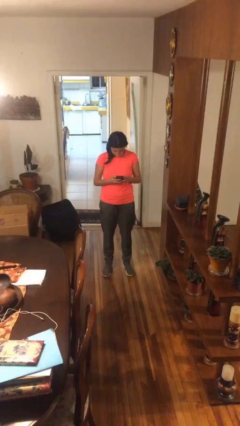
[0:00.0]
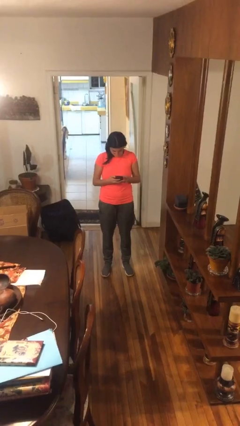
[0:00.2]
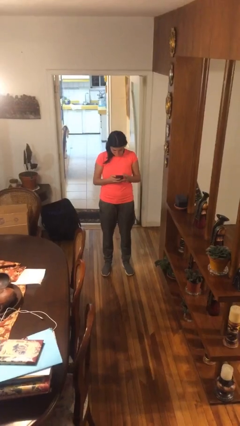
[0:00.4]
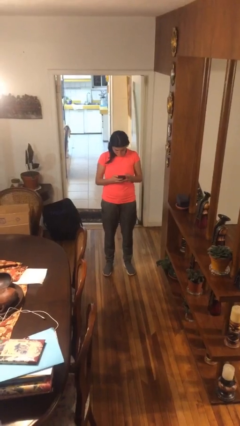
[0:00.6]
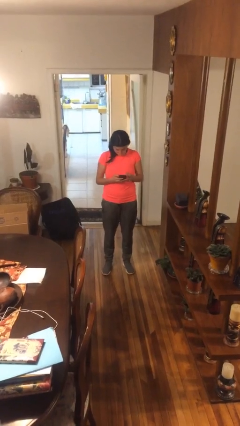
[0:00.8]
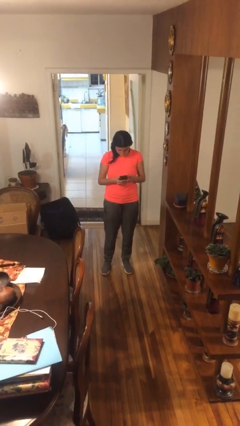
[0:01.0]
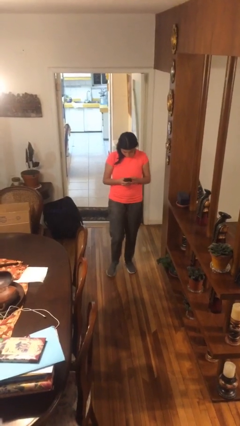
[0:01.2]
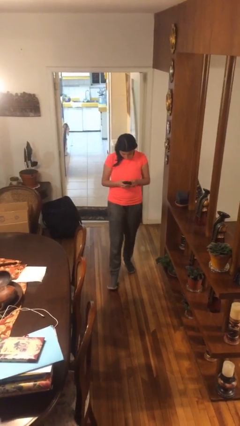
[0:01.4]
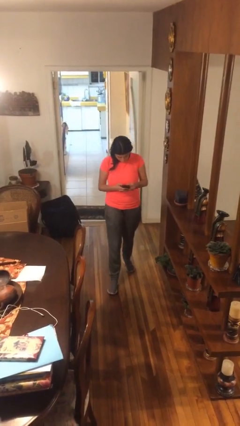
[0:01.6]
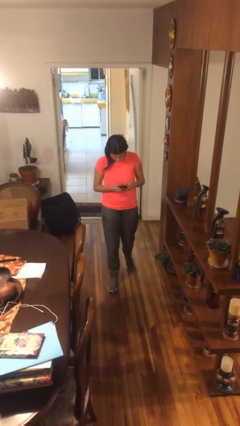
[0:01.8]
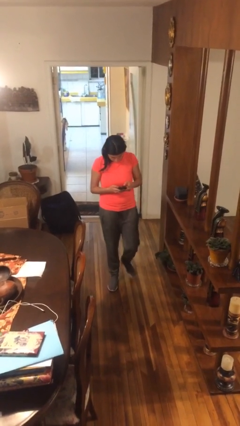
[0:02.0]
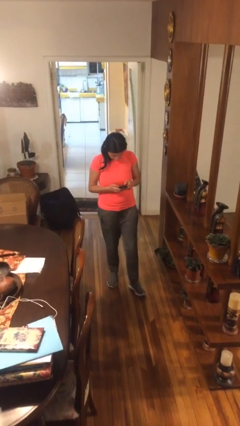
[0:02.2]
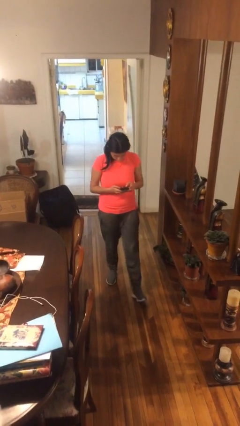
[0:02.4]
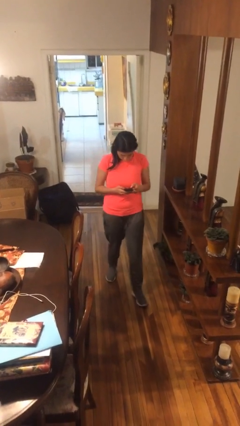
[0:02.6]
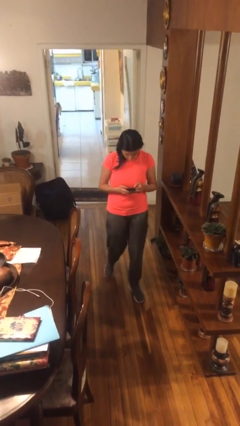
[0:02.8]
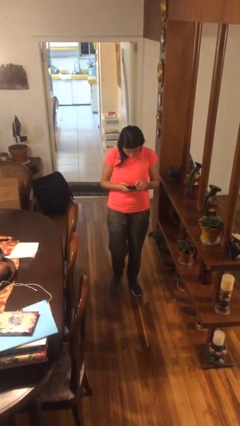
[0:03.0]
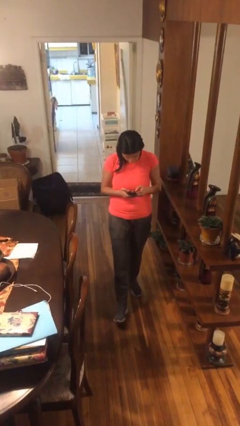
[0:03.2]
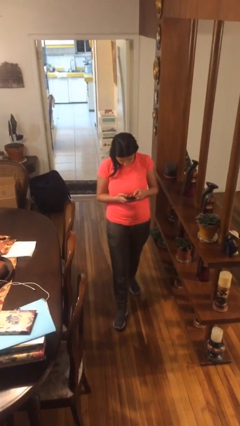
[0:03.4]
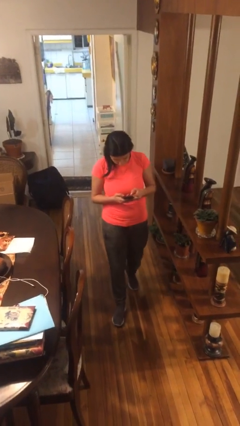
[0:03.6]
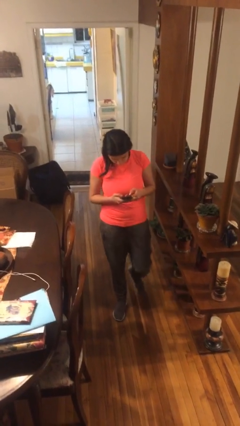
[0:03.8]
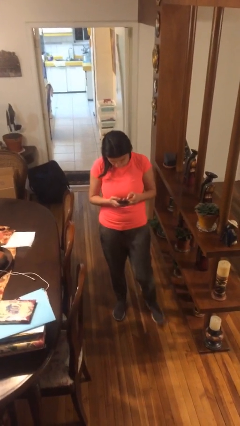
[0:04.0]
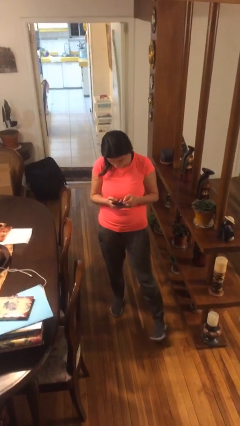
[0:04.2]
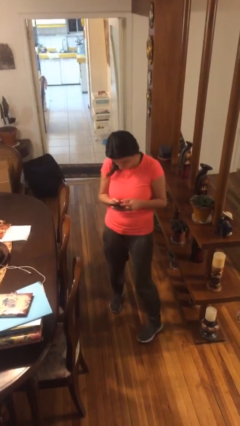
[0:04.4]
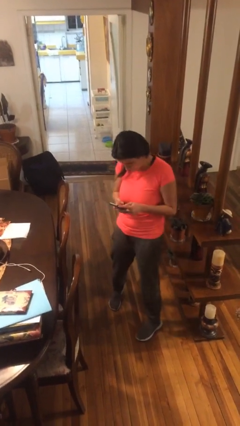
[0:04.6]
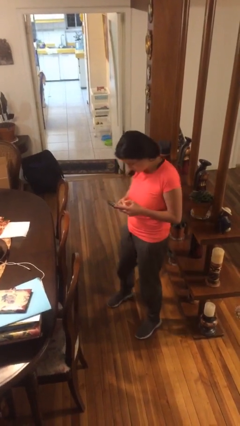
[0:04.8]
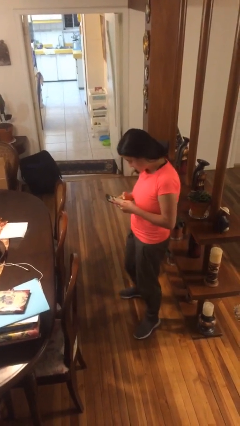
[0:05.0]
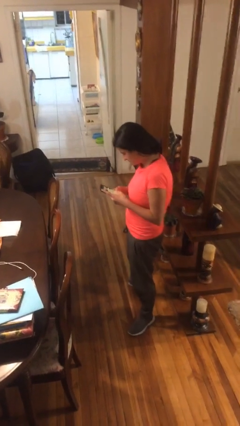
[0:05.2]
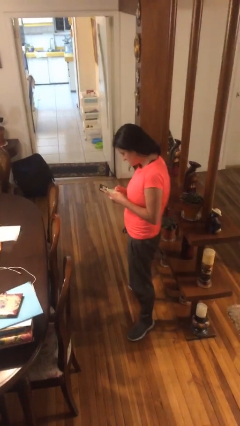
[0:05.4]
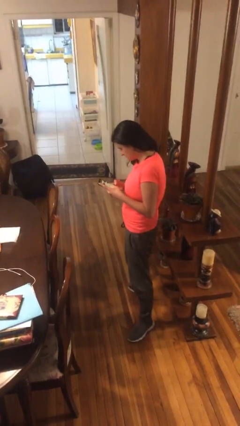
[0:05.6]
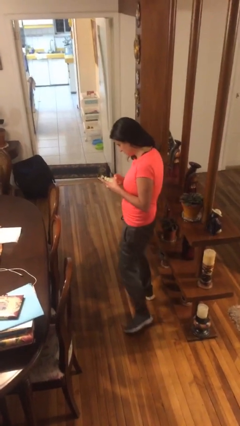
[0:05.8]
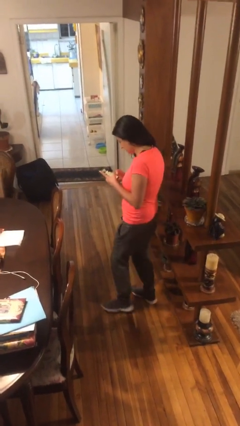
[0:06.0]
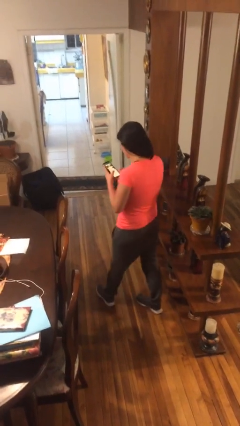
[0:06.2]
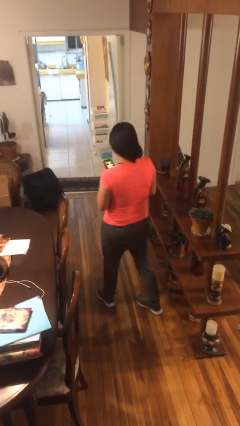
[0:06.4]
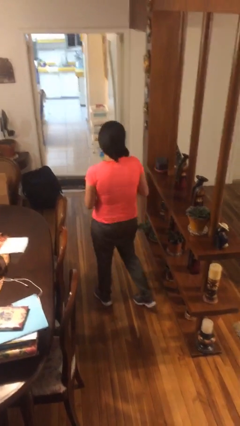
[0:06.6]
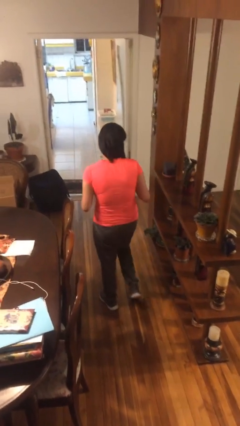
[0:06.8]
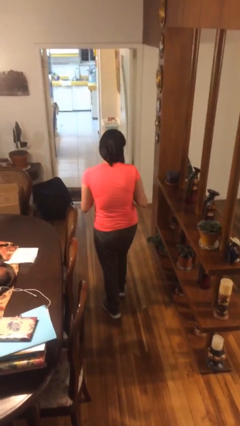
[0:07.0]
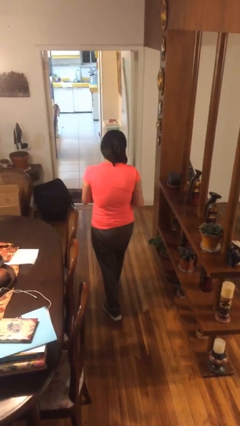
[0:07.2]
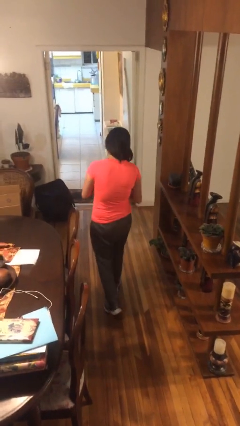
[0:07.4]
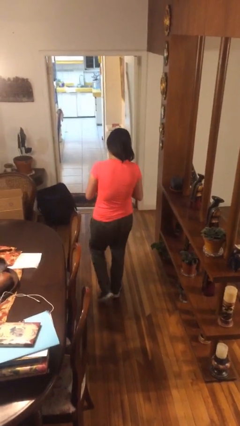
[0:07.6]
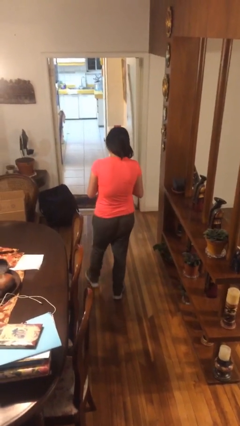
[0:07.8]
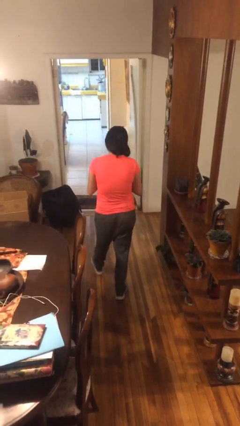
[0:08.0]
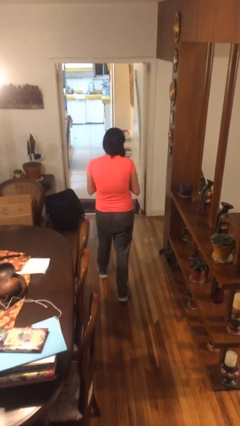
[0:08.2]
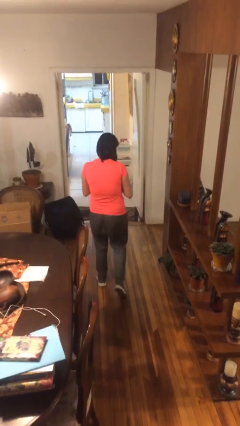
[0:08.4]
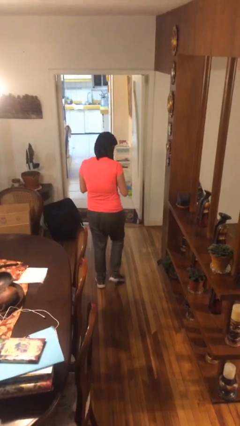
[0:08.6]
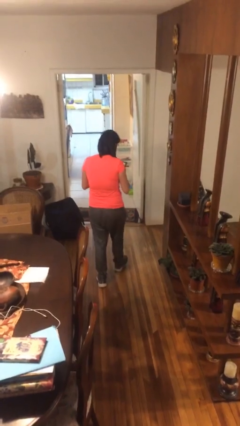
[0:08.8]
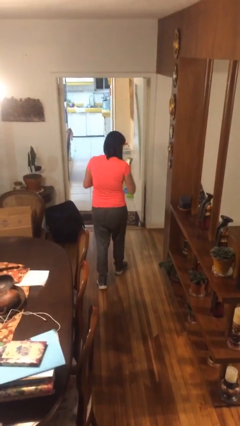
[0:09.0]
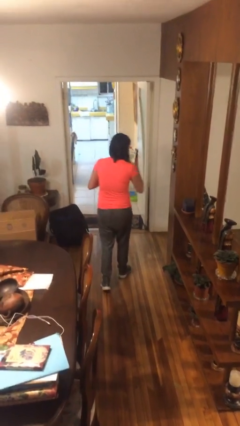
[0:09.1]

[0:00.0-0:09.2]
person texts on phone

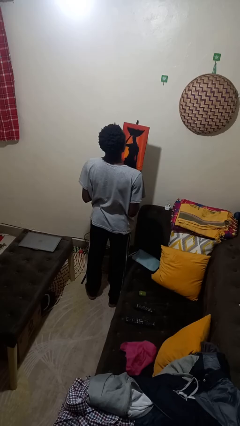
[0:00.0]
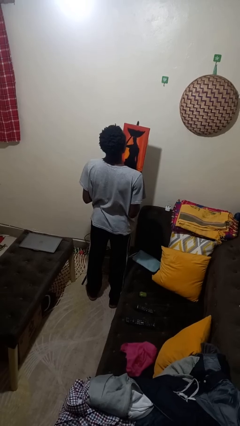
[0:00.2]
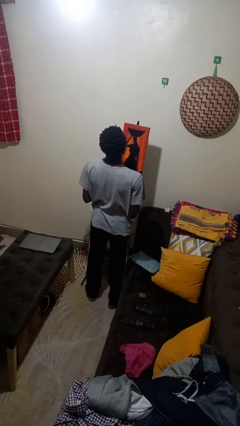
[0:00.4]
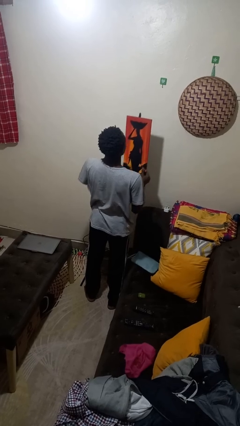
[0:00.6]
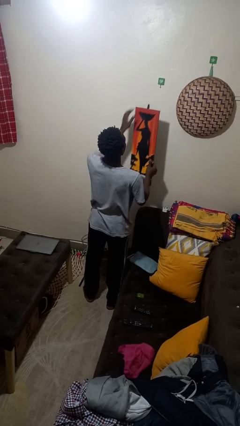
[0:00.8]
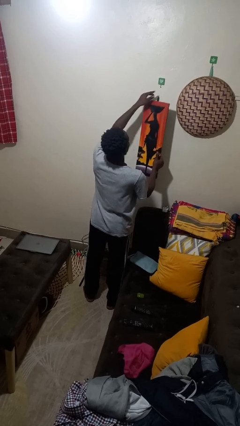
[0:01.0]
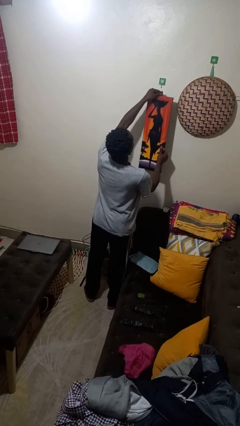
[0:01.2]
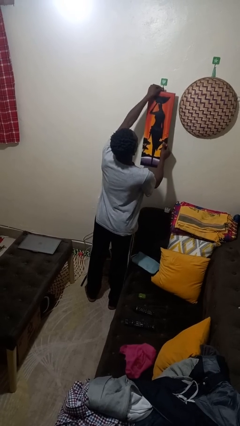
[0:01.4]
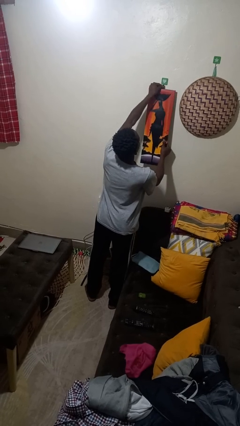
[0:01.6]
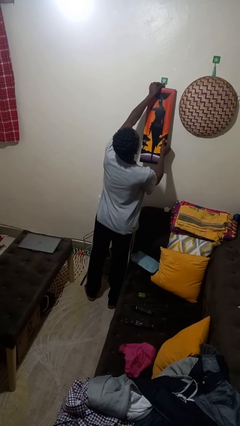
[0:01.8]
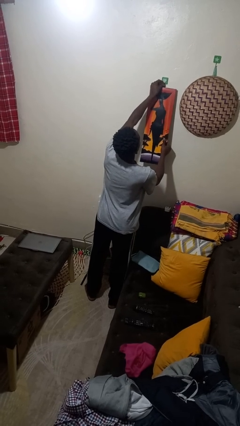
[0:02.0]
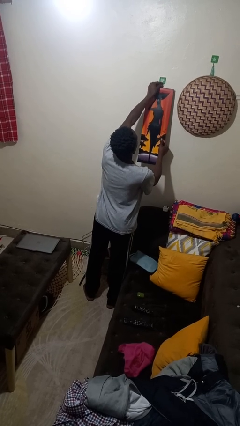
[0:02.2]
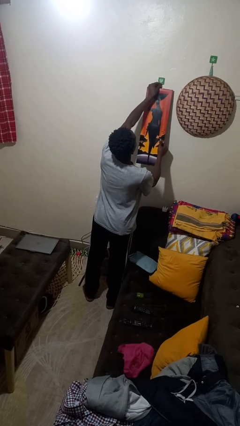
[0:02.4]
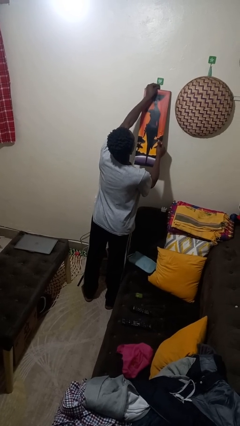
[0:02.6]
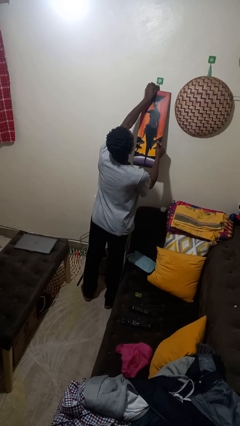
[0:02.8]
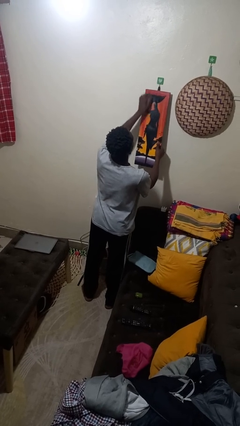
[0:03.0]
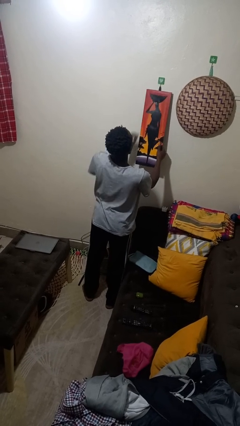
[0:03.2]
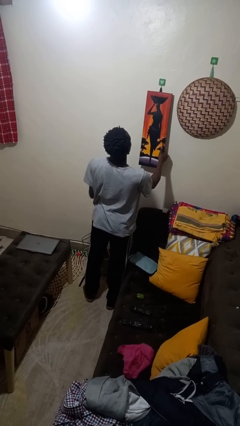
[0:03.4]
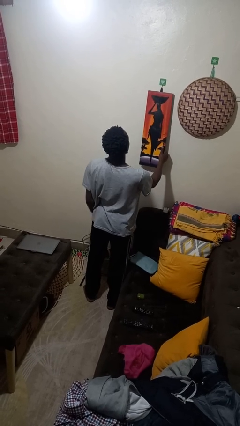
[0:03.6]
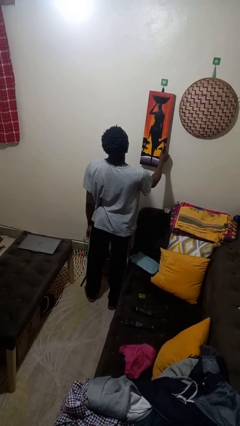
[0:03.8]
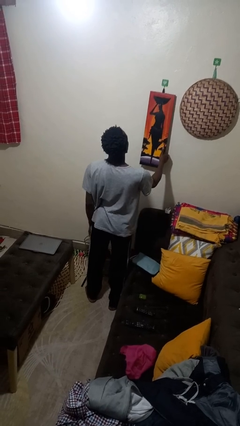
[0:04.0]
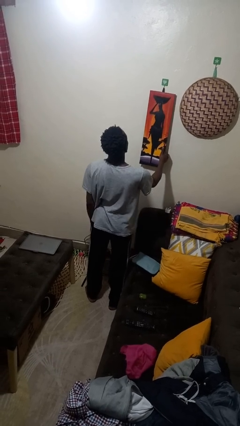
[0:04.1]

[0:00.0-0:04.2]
person puts up picture frame

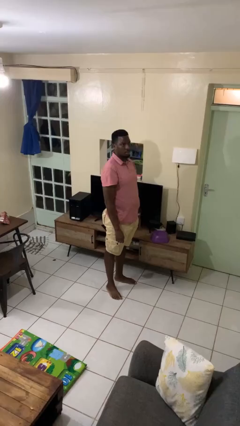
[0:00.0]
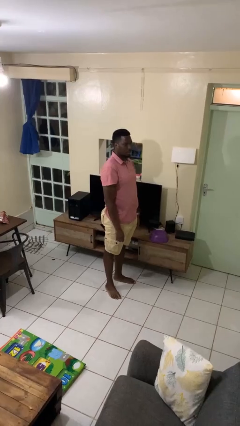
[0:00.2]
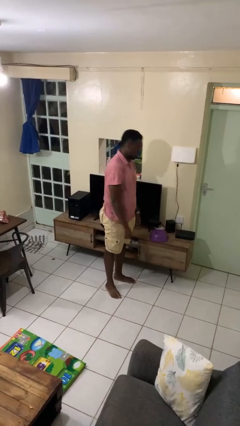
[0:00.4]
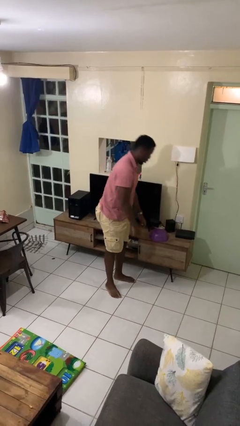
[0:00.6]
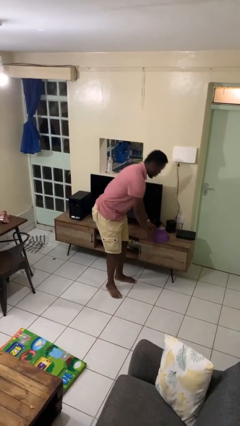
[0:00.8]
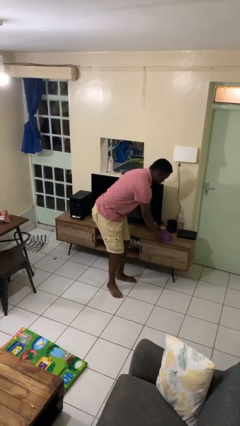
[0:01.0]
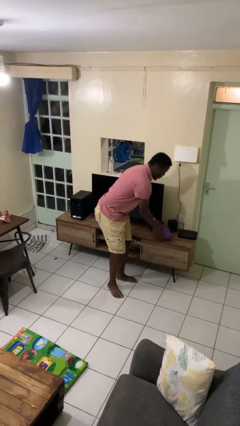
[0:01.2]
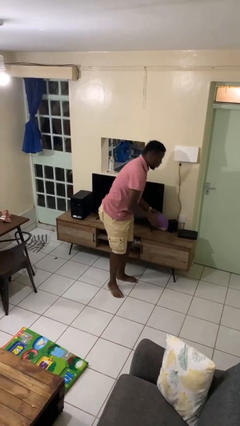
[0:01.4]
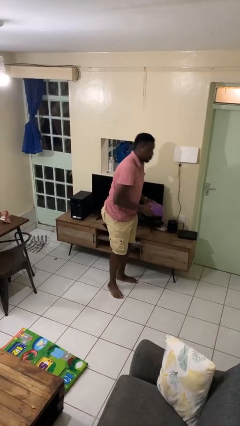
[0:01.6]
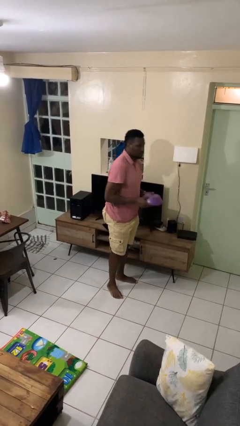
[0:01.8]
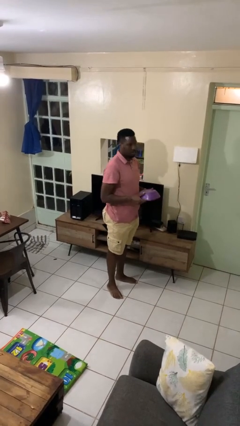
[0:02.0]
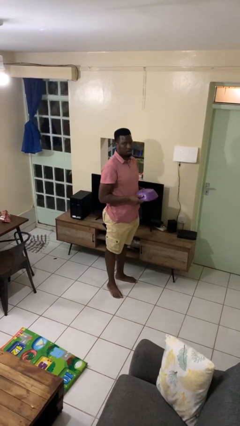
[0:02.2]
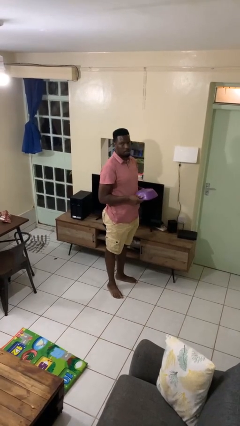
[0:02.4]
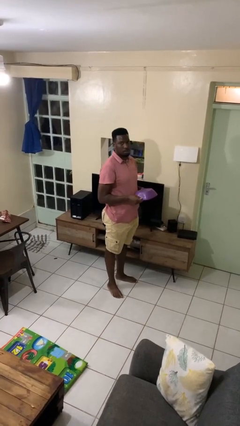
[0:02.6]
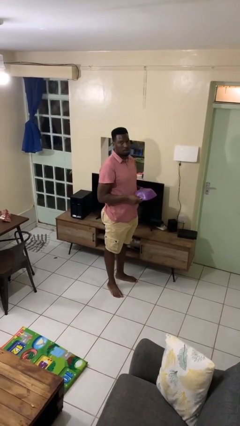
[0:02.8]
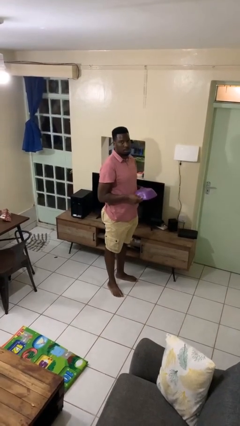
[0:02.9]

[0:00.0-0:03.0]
person picks up object from countertop

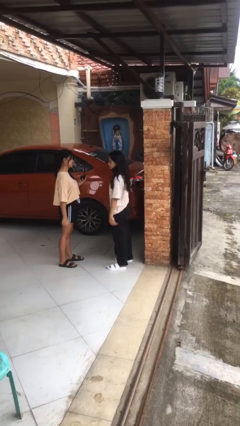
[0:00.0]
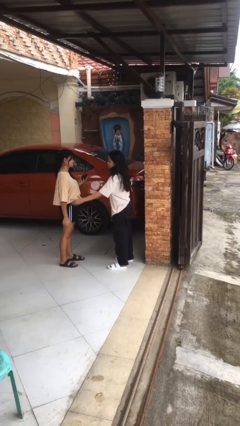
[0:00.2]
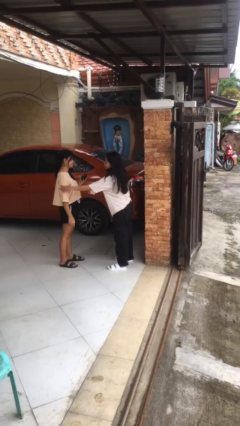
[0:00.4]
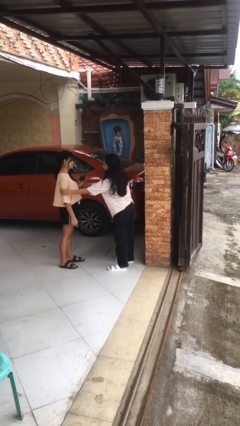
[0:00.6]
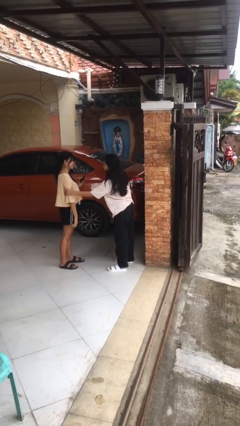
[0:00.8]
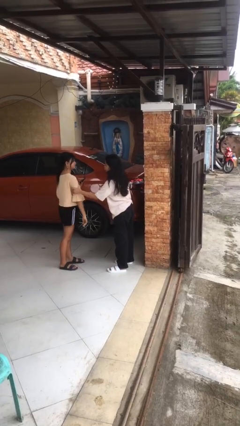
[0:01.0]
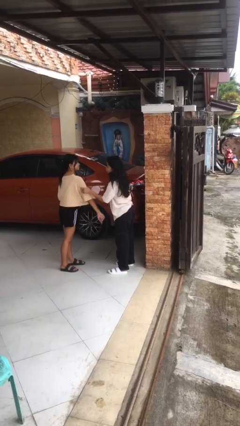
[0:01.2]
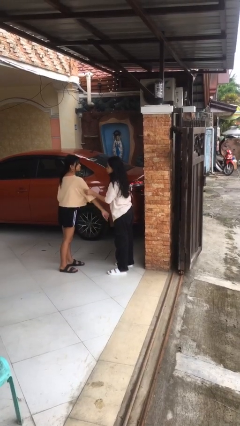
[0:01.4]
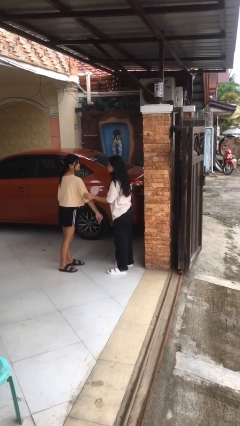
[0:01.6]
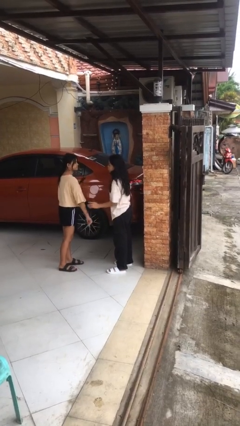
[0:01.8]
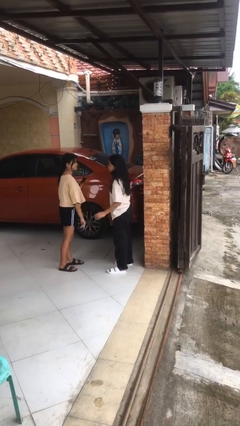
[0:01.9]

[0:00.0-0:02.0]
person grabs person by bicep
